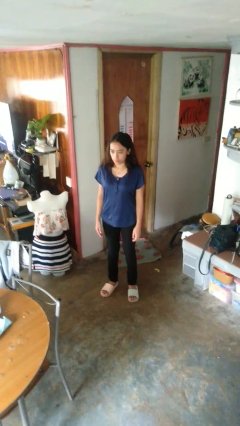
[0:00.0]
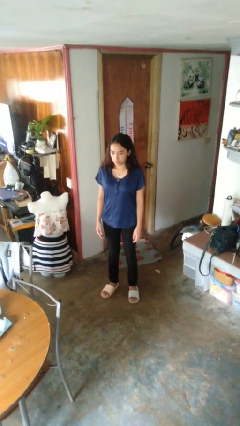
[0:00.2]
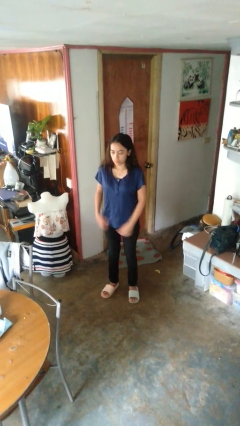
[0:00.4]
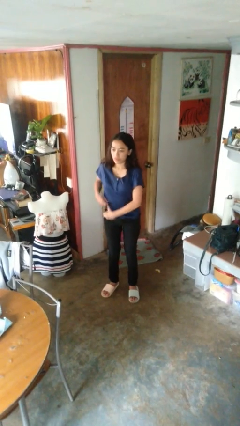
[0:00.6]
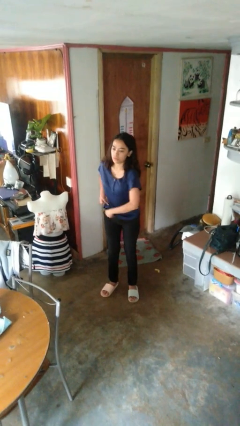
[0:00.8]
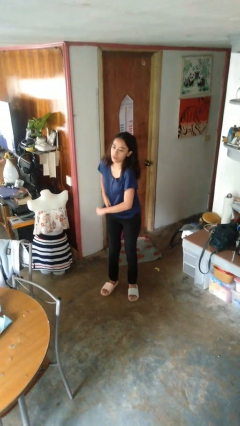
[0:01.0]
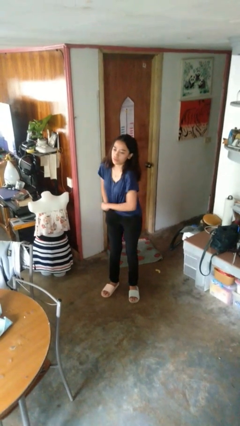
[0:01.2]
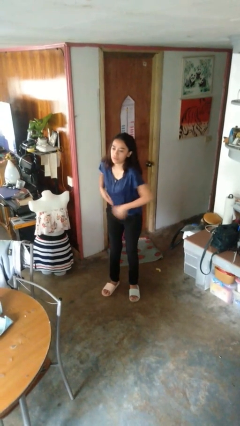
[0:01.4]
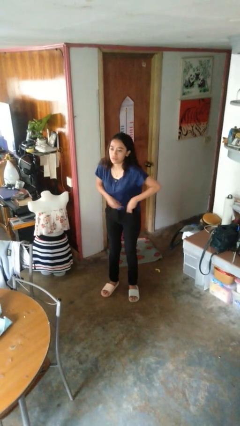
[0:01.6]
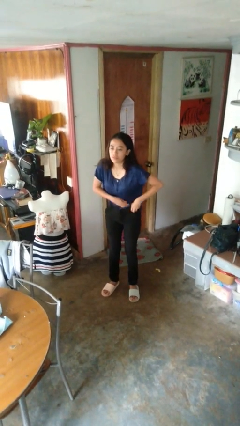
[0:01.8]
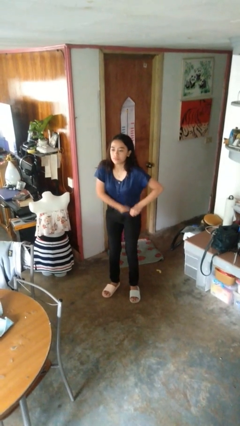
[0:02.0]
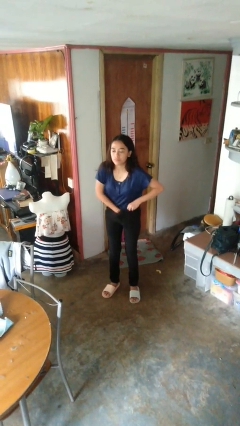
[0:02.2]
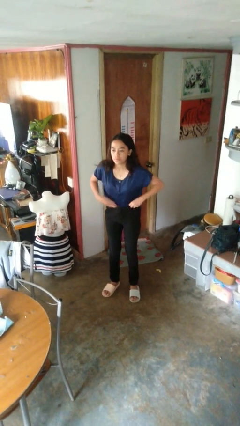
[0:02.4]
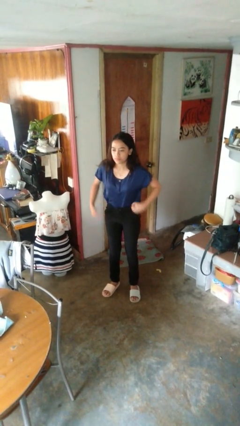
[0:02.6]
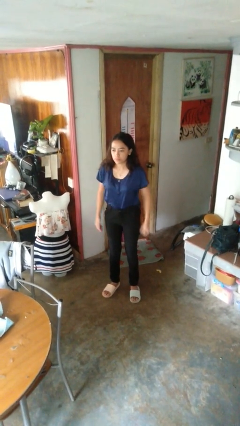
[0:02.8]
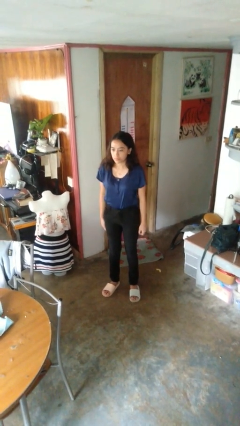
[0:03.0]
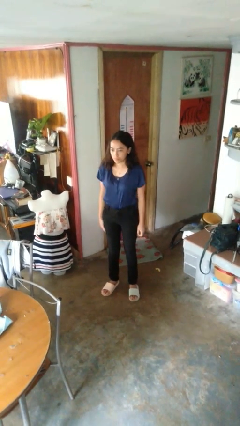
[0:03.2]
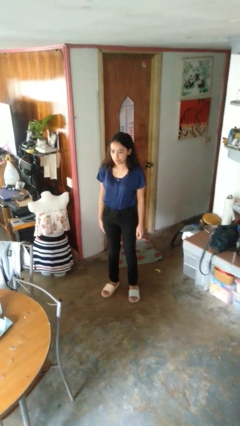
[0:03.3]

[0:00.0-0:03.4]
person tucks in shirt

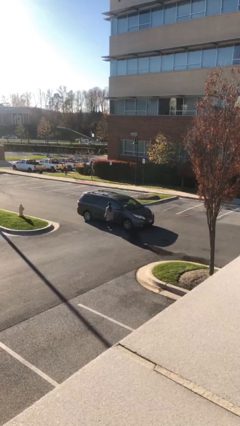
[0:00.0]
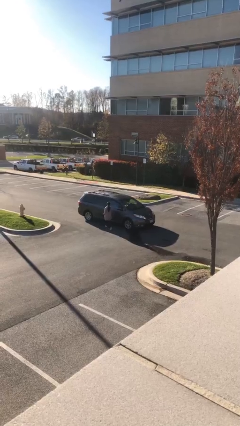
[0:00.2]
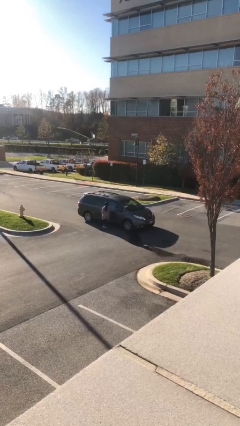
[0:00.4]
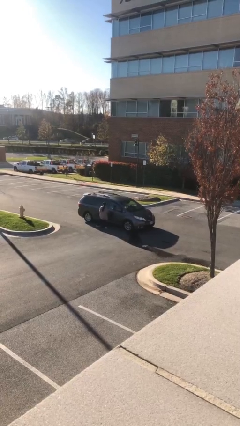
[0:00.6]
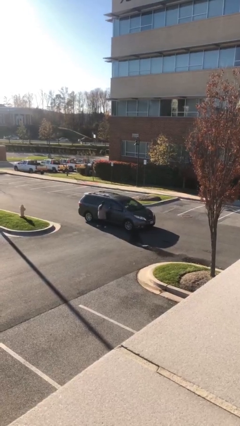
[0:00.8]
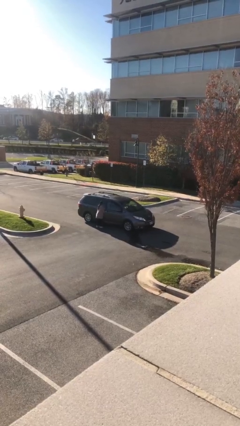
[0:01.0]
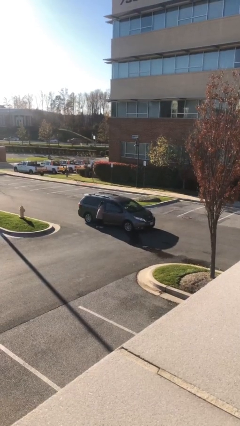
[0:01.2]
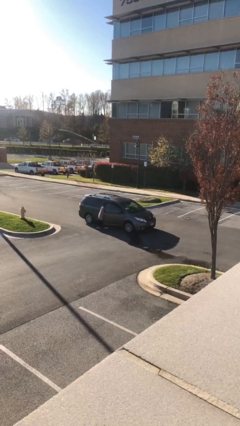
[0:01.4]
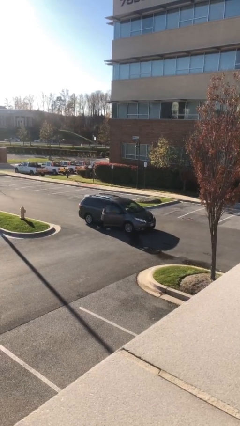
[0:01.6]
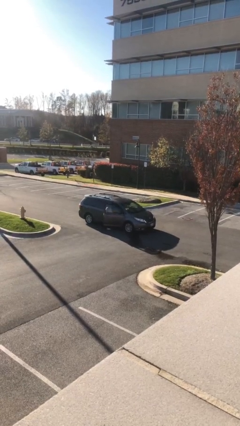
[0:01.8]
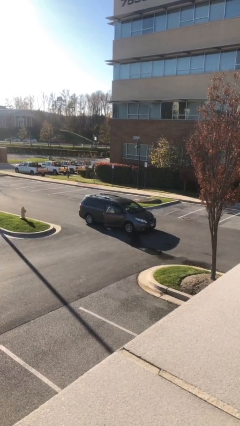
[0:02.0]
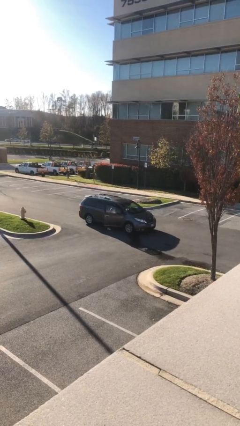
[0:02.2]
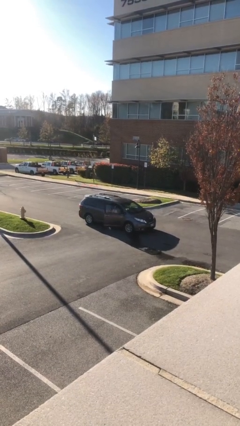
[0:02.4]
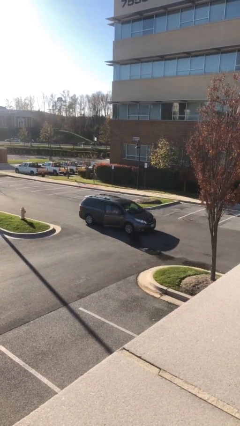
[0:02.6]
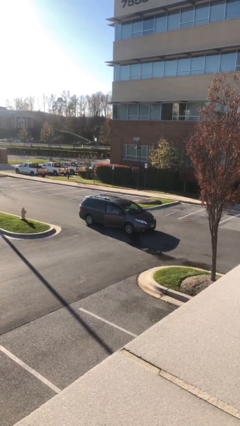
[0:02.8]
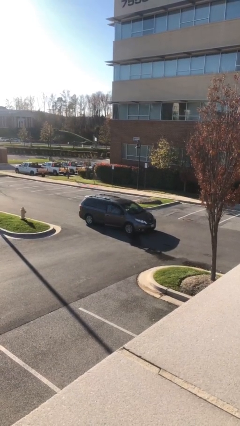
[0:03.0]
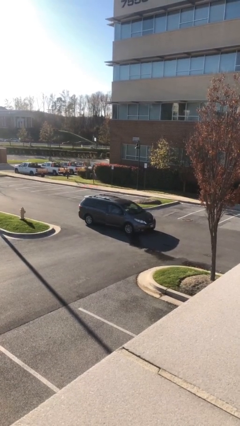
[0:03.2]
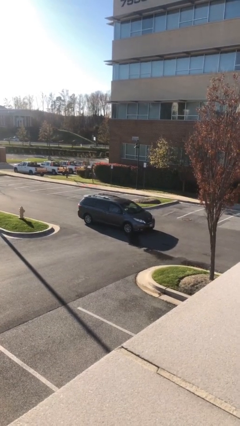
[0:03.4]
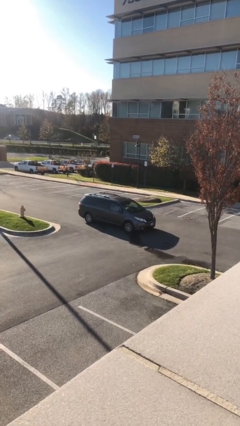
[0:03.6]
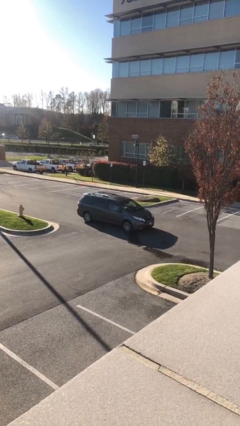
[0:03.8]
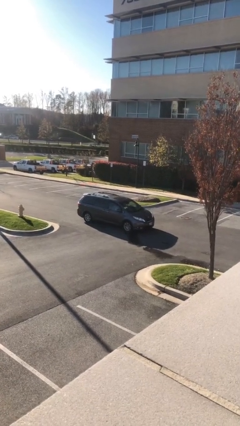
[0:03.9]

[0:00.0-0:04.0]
car picks up person

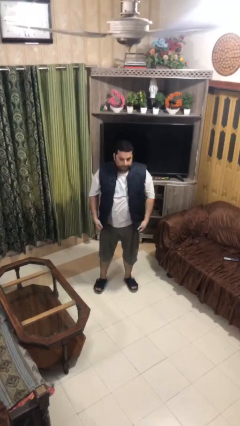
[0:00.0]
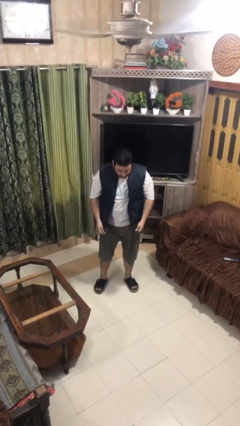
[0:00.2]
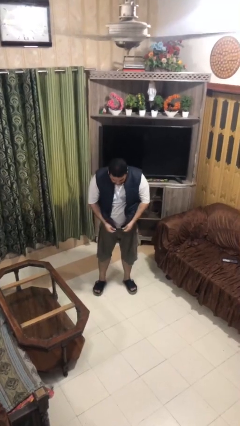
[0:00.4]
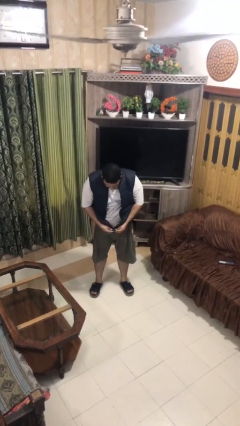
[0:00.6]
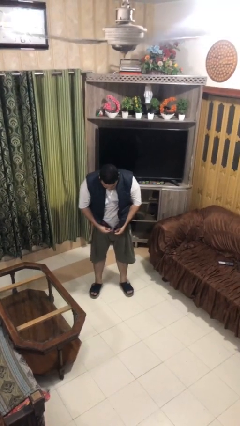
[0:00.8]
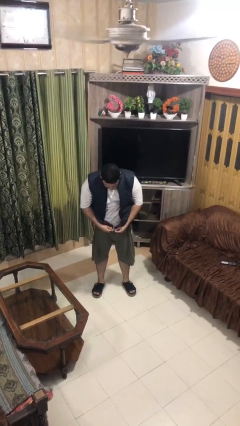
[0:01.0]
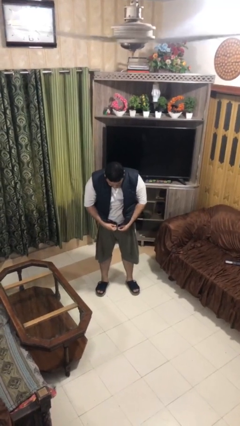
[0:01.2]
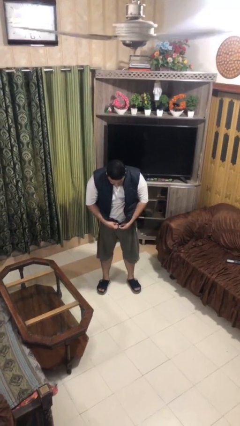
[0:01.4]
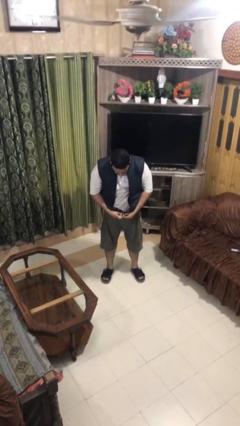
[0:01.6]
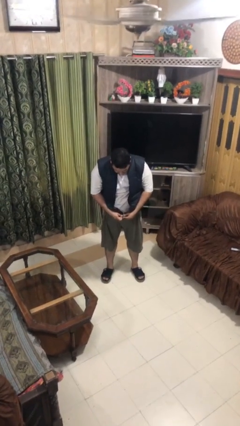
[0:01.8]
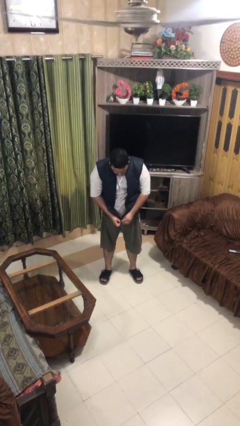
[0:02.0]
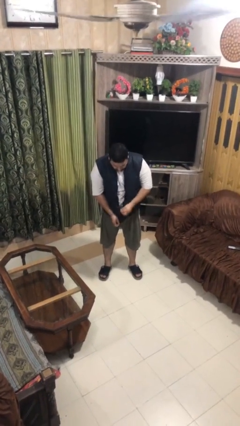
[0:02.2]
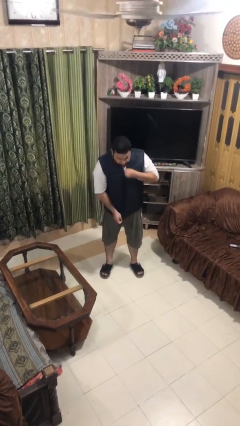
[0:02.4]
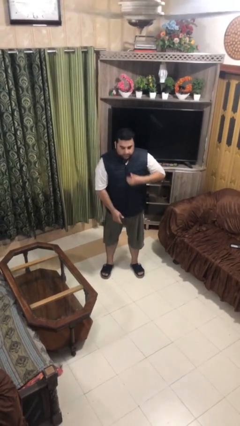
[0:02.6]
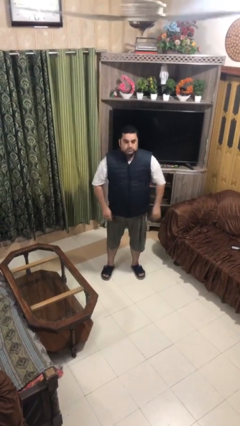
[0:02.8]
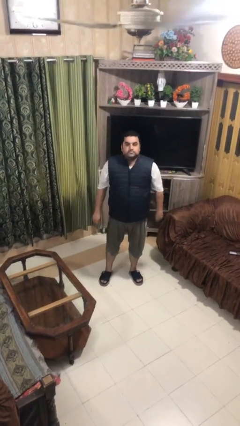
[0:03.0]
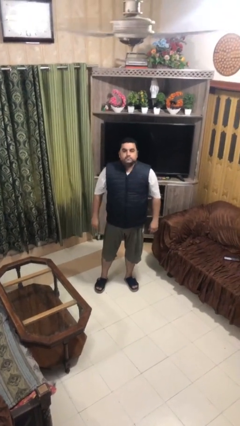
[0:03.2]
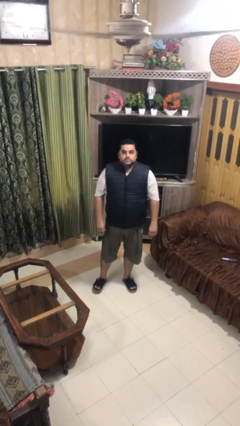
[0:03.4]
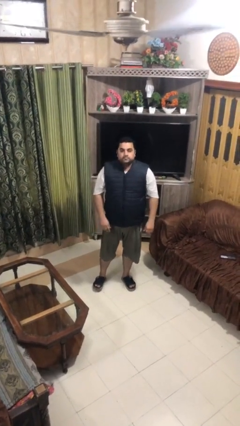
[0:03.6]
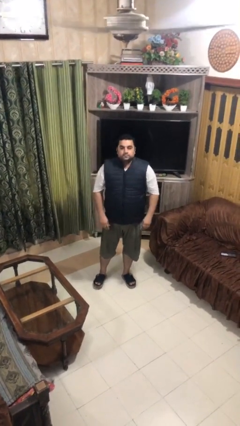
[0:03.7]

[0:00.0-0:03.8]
person zips up jacket

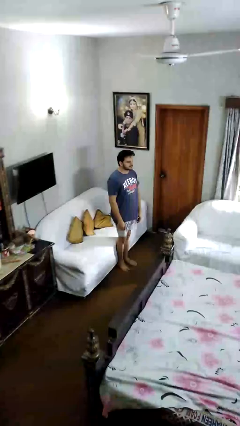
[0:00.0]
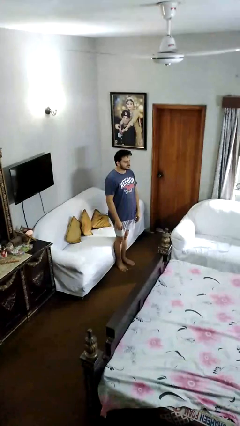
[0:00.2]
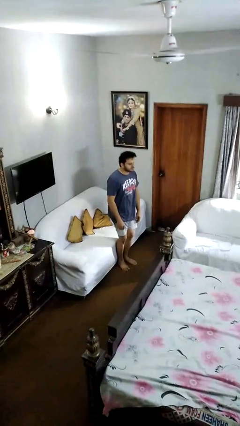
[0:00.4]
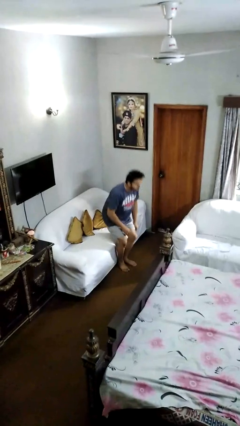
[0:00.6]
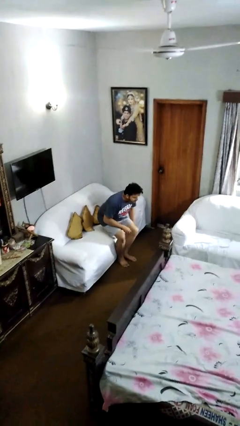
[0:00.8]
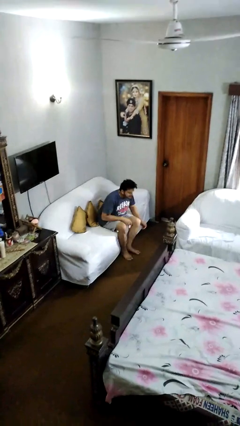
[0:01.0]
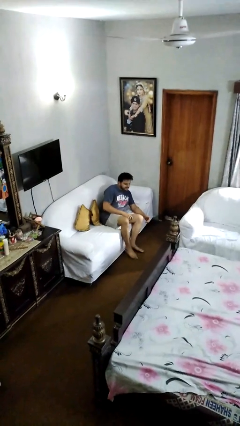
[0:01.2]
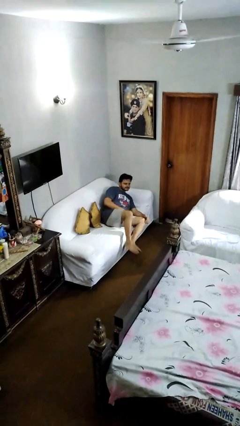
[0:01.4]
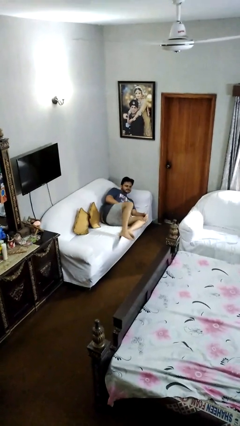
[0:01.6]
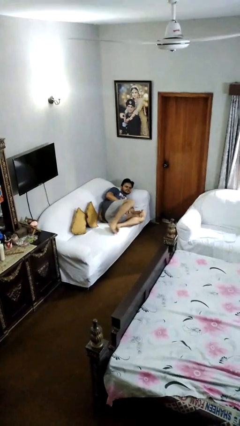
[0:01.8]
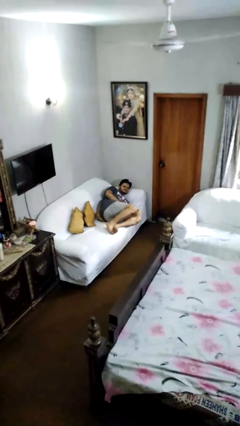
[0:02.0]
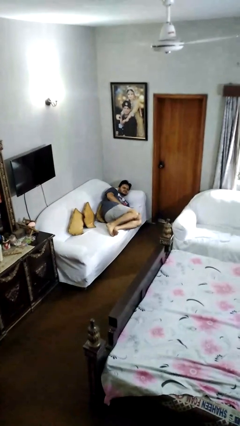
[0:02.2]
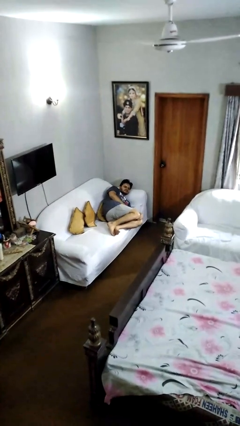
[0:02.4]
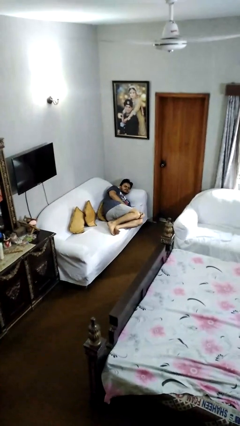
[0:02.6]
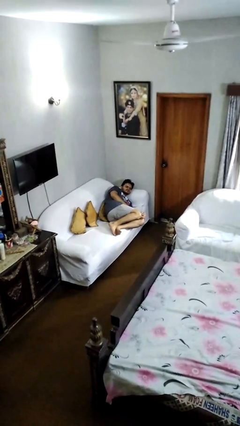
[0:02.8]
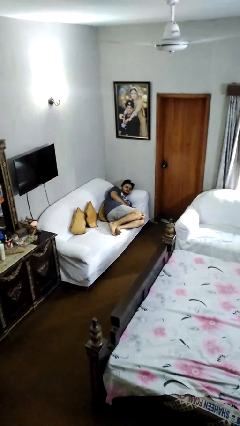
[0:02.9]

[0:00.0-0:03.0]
person lies down on couch

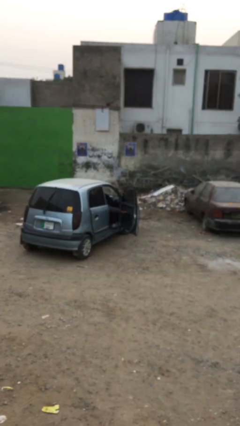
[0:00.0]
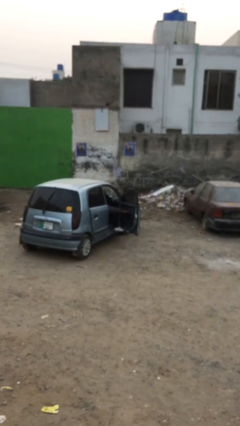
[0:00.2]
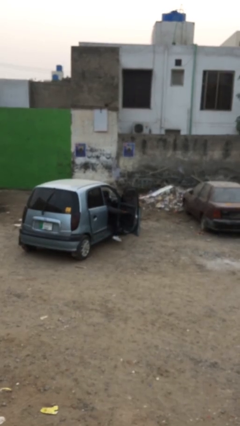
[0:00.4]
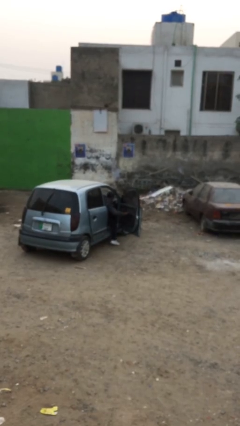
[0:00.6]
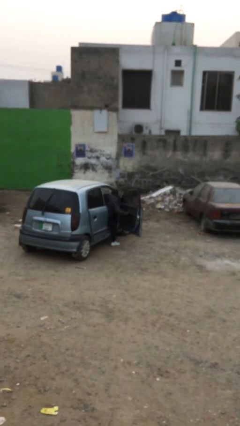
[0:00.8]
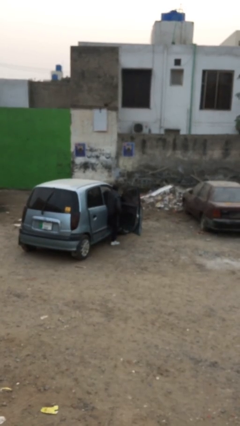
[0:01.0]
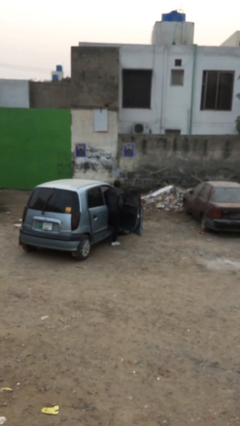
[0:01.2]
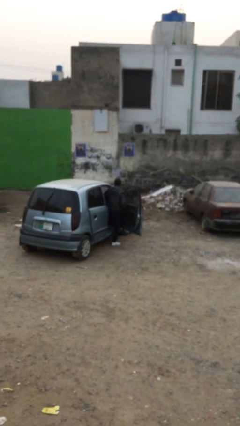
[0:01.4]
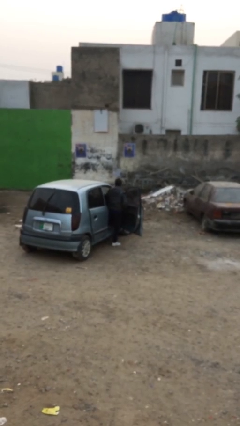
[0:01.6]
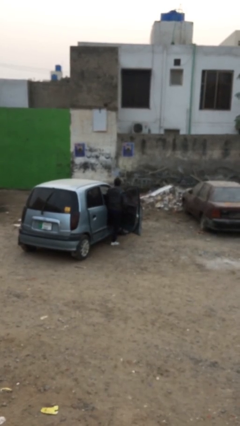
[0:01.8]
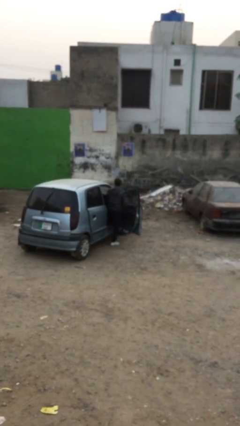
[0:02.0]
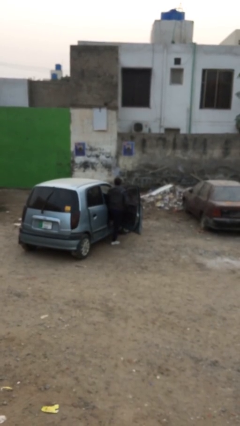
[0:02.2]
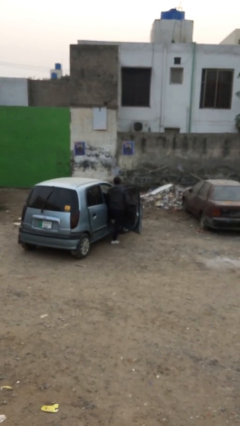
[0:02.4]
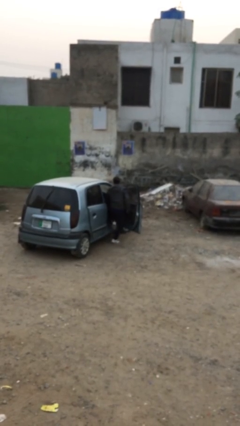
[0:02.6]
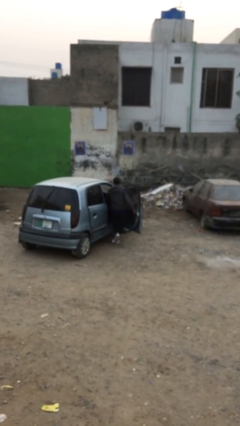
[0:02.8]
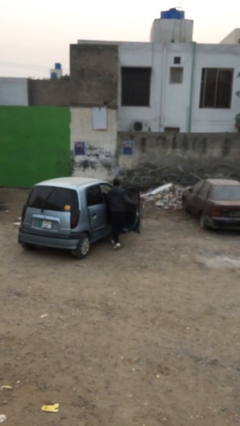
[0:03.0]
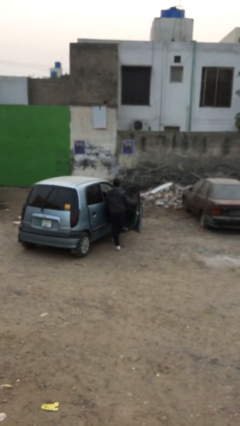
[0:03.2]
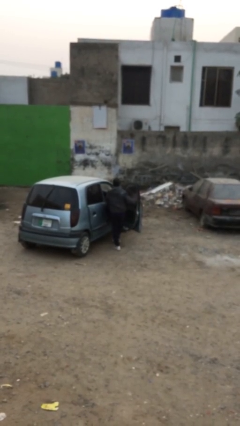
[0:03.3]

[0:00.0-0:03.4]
person exits car
